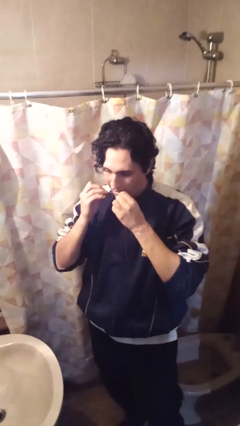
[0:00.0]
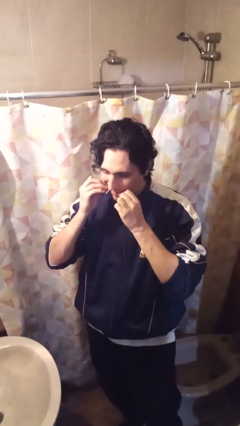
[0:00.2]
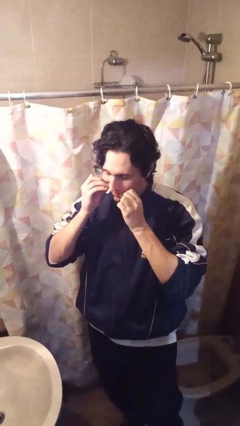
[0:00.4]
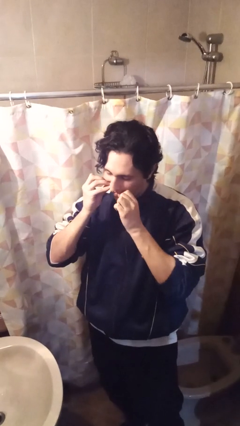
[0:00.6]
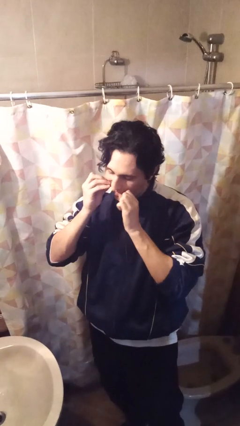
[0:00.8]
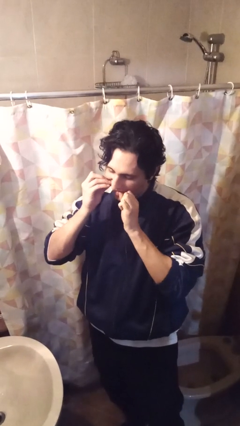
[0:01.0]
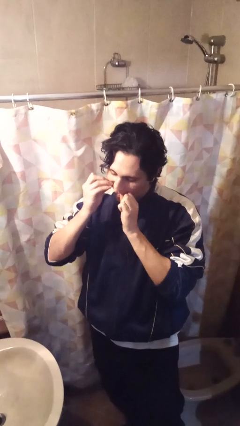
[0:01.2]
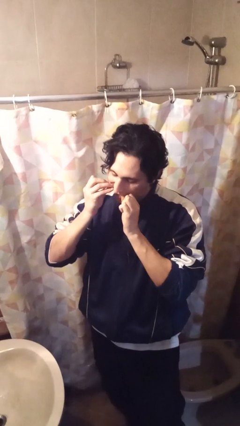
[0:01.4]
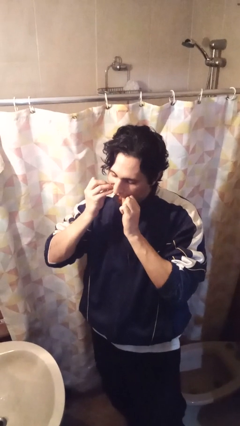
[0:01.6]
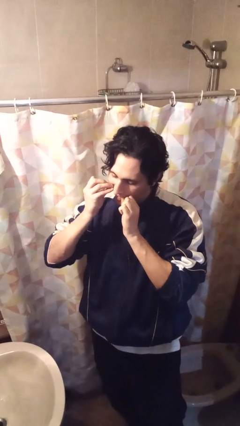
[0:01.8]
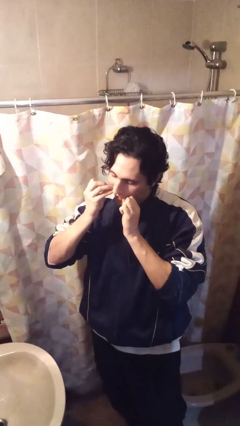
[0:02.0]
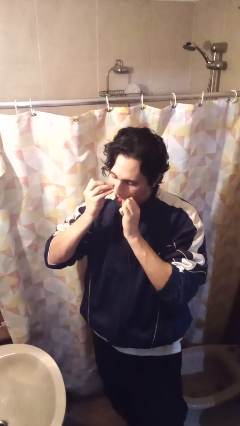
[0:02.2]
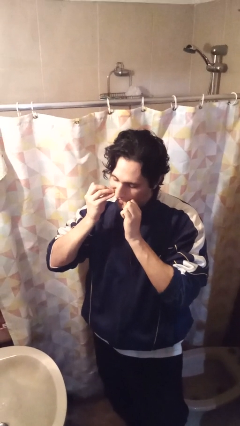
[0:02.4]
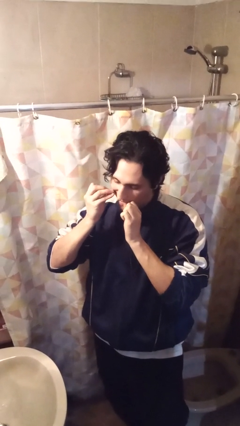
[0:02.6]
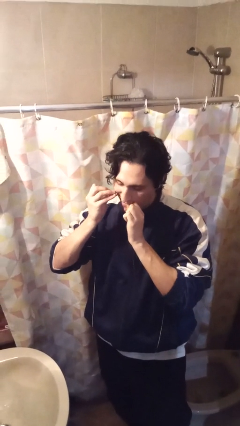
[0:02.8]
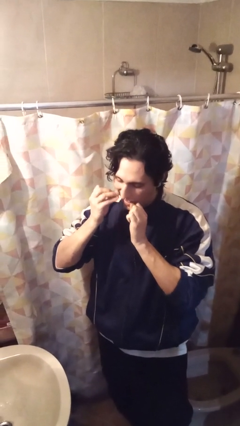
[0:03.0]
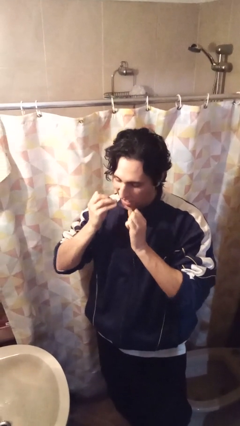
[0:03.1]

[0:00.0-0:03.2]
person flosses

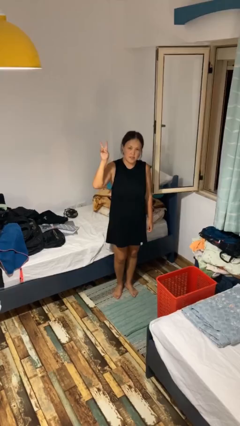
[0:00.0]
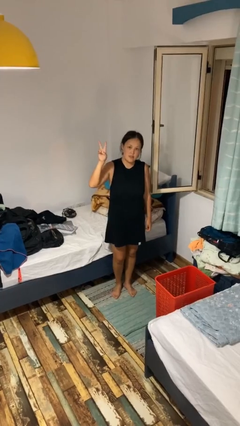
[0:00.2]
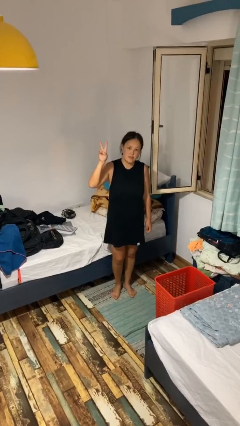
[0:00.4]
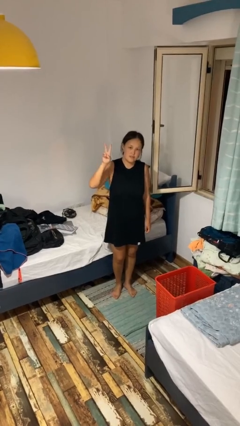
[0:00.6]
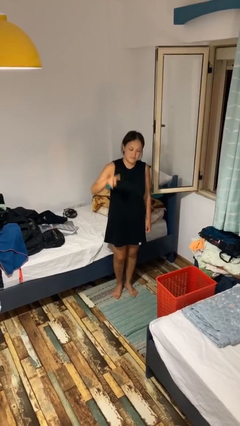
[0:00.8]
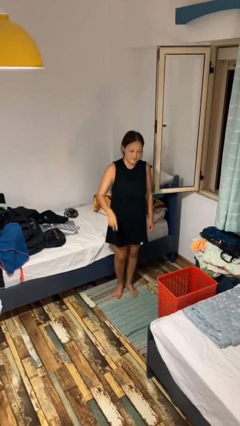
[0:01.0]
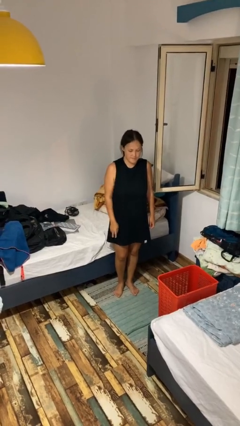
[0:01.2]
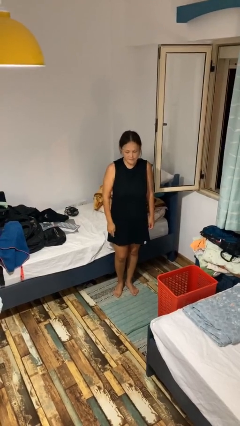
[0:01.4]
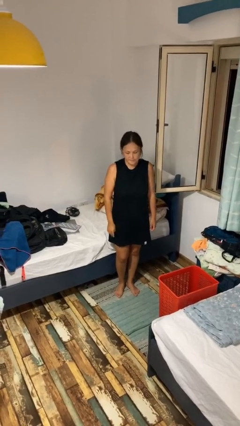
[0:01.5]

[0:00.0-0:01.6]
person gestures peace

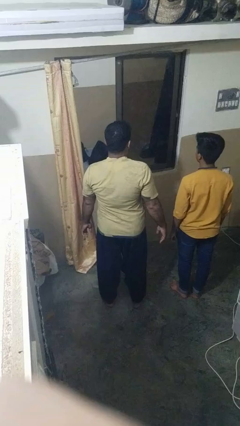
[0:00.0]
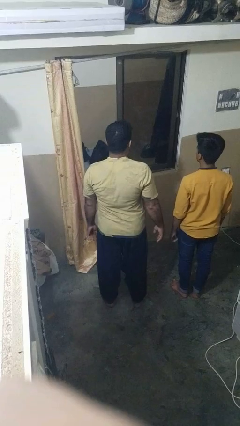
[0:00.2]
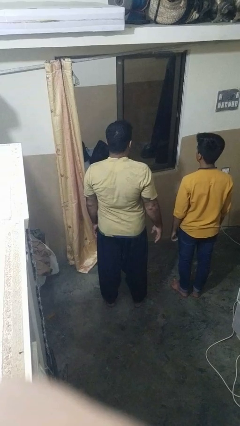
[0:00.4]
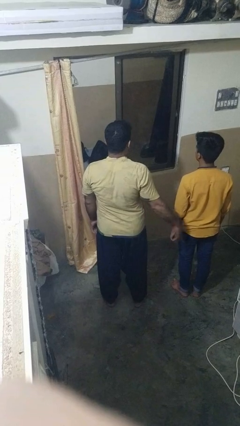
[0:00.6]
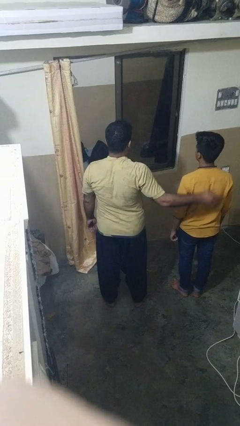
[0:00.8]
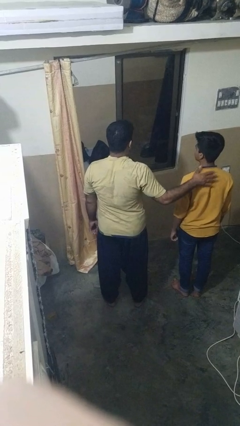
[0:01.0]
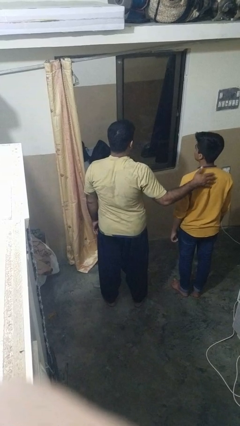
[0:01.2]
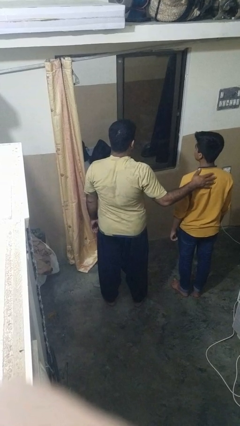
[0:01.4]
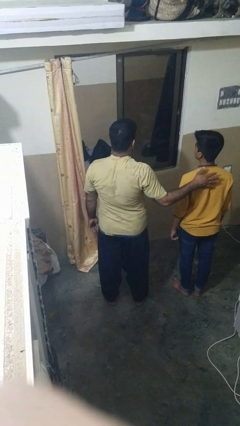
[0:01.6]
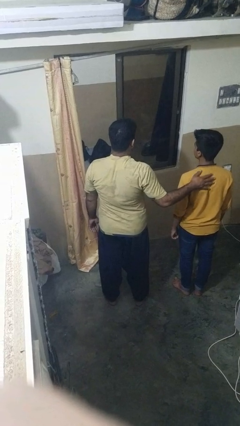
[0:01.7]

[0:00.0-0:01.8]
person touches back of person

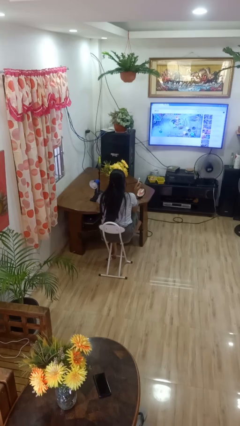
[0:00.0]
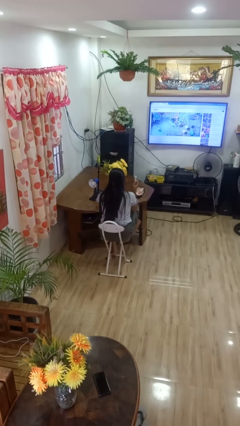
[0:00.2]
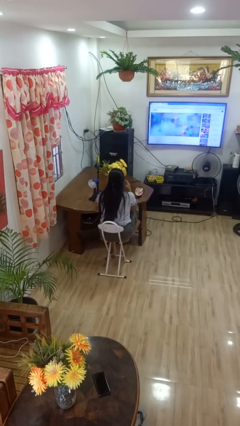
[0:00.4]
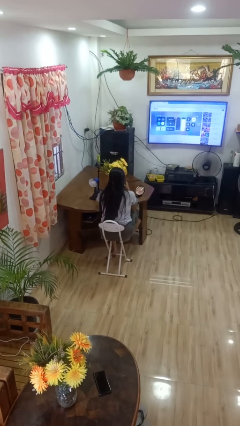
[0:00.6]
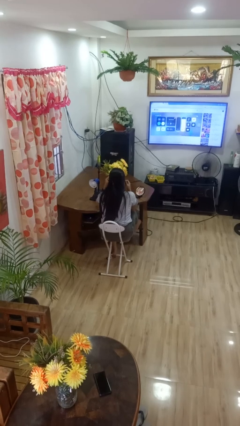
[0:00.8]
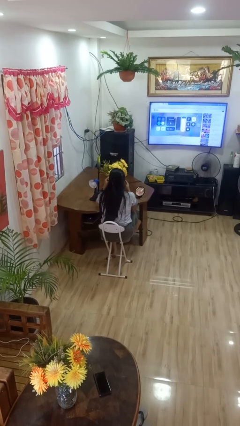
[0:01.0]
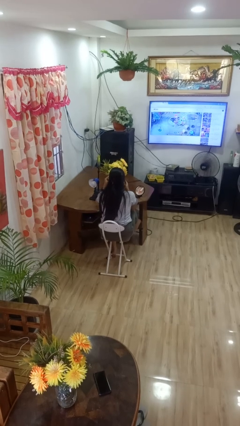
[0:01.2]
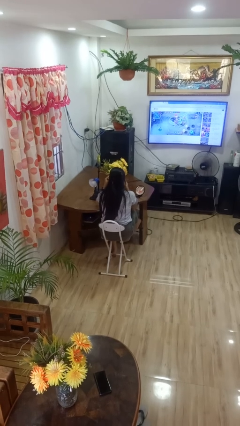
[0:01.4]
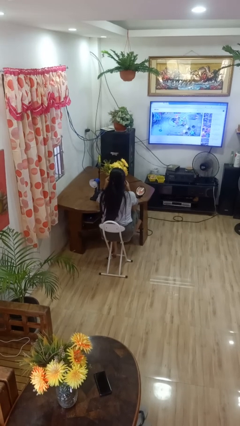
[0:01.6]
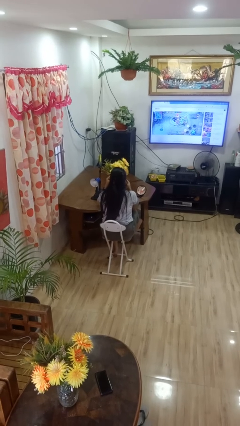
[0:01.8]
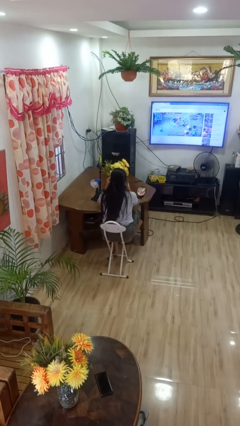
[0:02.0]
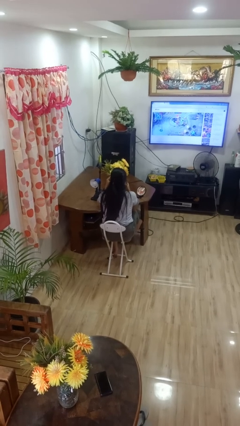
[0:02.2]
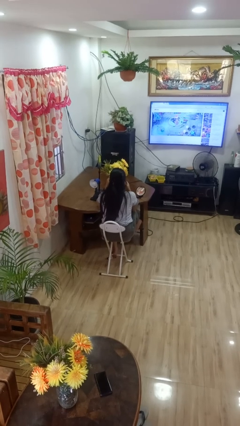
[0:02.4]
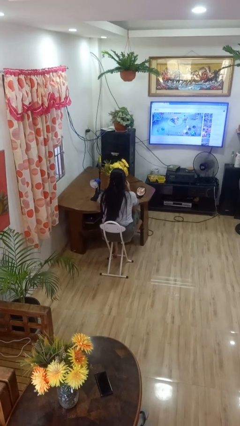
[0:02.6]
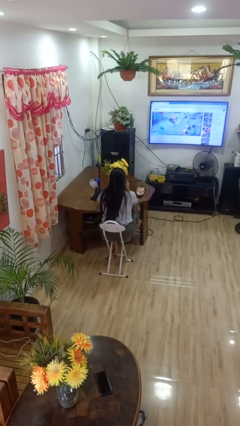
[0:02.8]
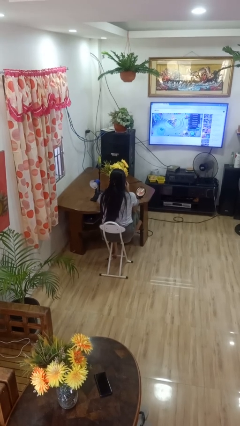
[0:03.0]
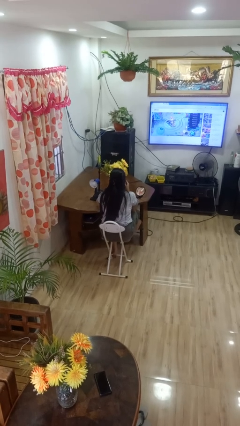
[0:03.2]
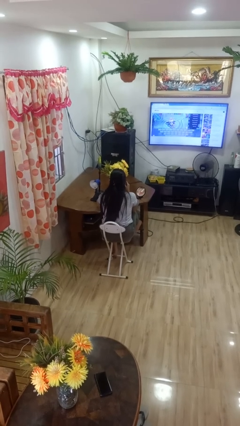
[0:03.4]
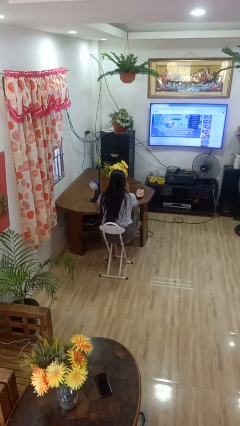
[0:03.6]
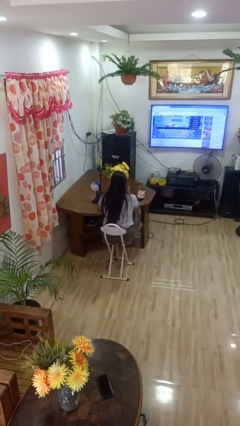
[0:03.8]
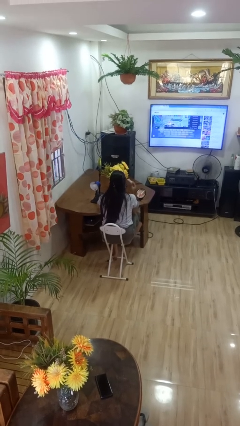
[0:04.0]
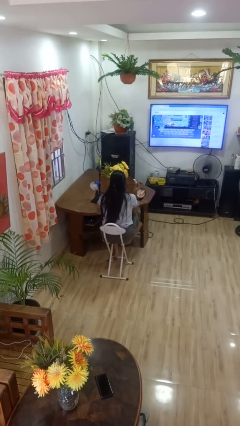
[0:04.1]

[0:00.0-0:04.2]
person applies lip makeup

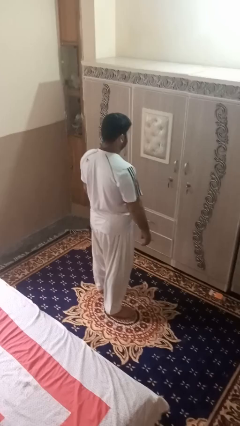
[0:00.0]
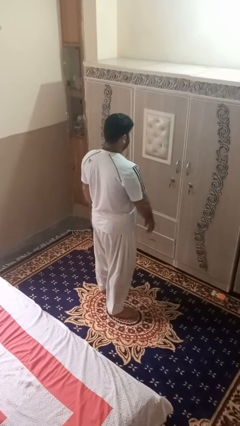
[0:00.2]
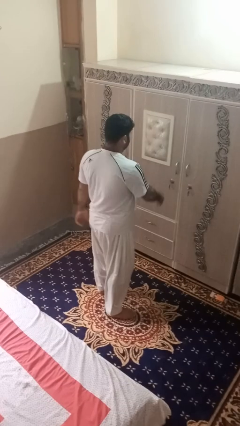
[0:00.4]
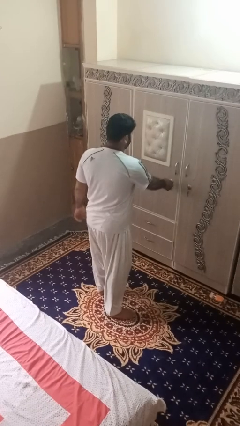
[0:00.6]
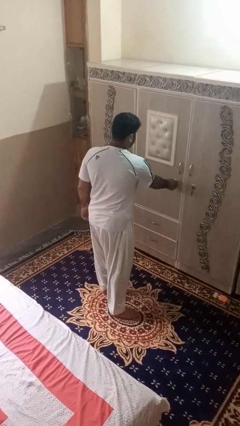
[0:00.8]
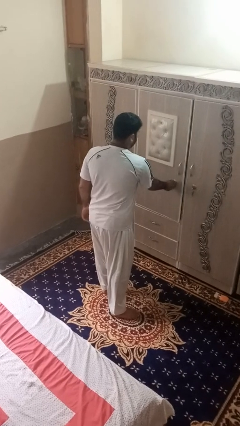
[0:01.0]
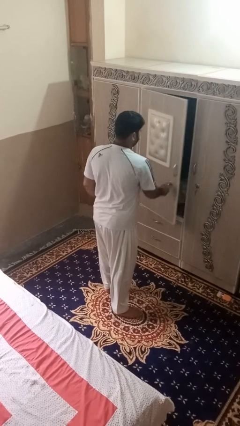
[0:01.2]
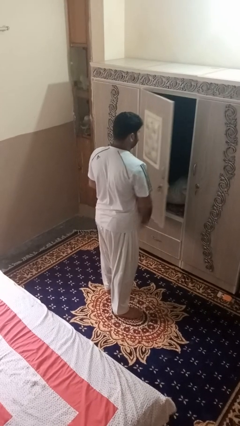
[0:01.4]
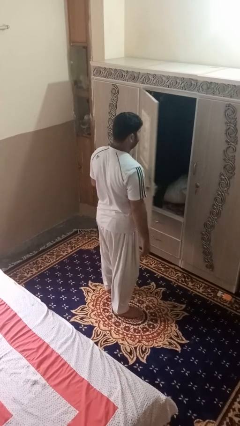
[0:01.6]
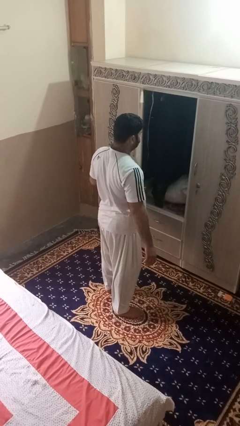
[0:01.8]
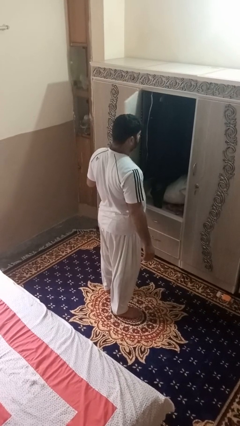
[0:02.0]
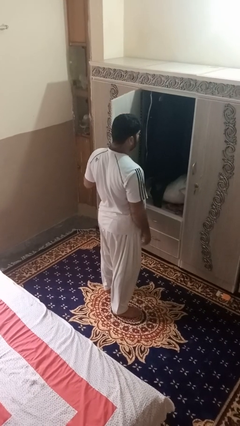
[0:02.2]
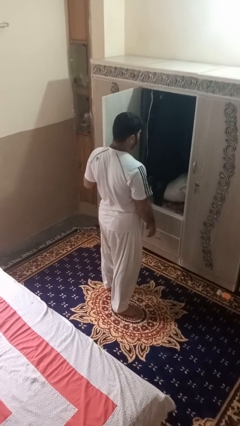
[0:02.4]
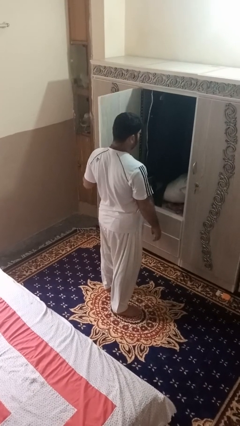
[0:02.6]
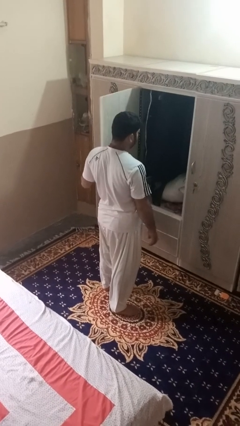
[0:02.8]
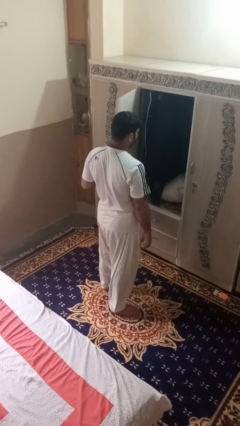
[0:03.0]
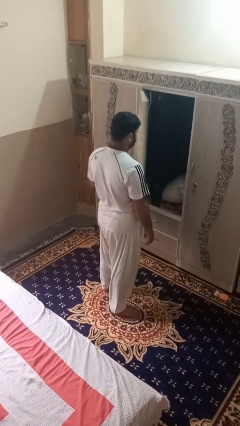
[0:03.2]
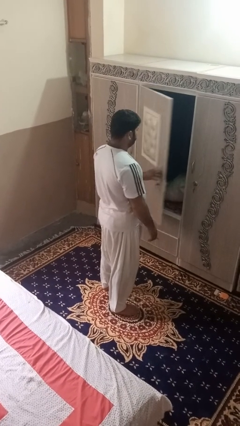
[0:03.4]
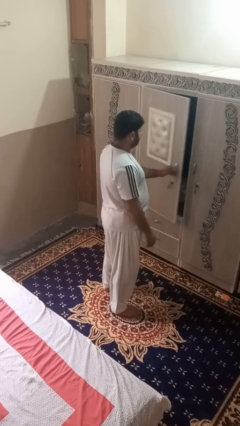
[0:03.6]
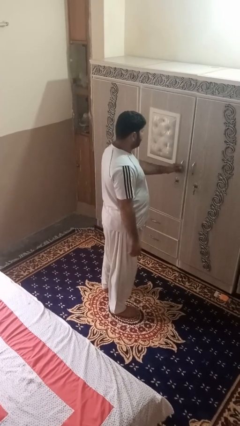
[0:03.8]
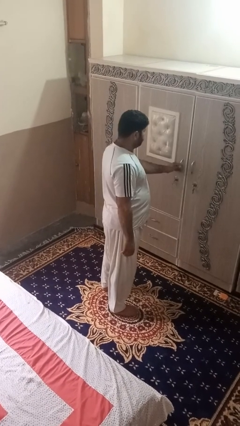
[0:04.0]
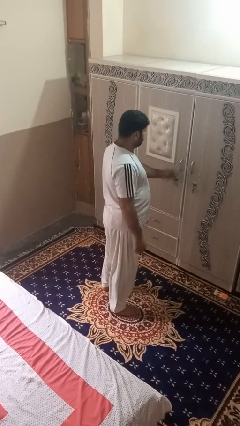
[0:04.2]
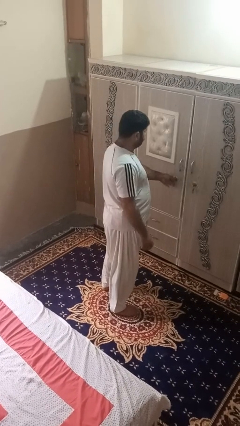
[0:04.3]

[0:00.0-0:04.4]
person opens dresser drawer

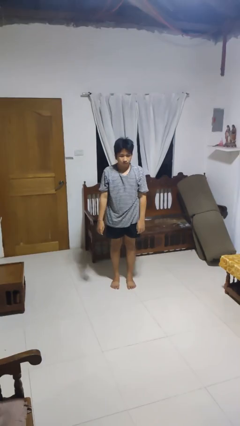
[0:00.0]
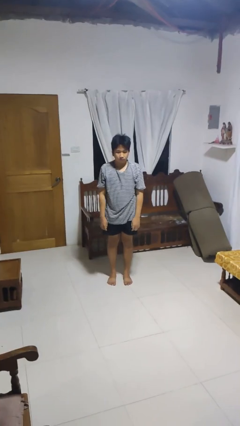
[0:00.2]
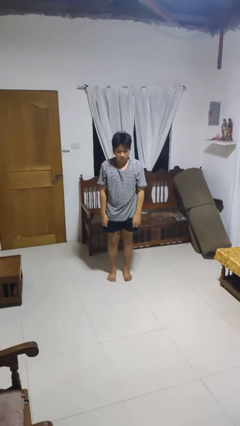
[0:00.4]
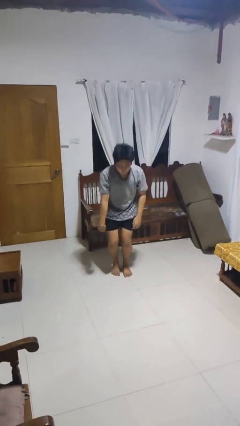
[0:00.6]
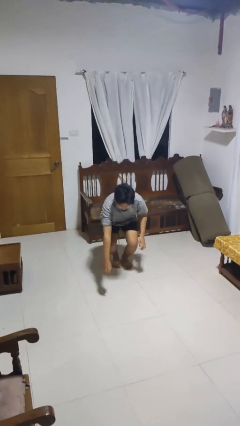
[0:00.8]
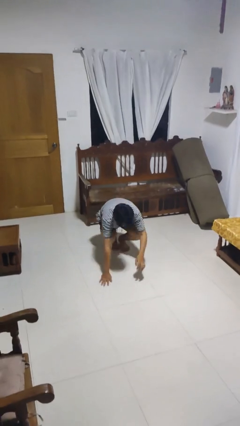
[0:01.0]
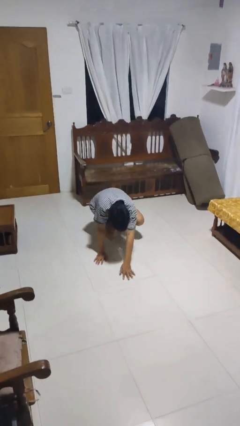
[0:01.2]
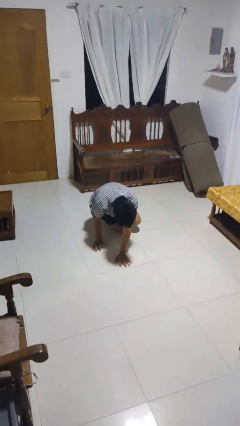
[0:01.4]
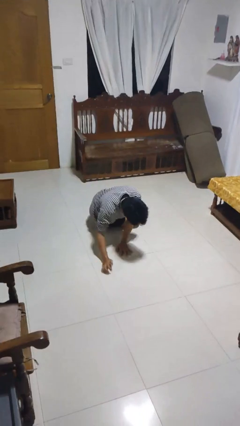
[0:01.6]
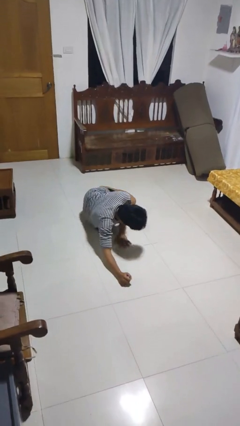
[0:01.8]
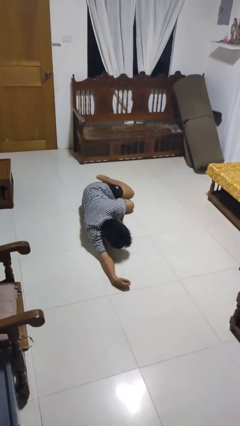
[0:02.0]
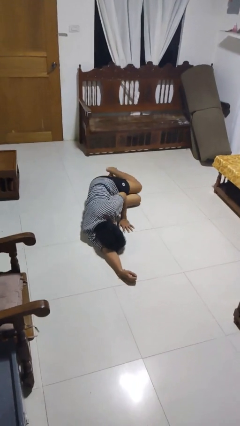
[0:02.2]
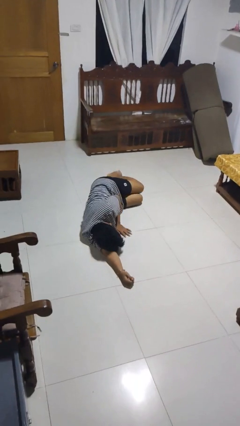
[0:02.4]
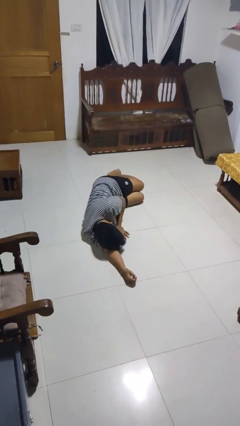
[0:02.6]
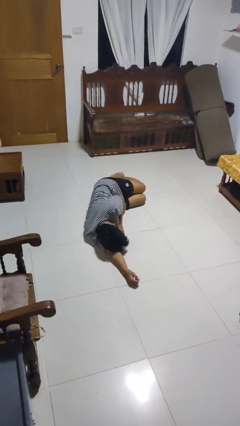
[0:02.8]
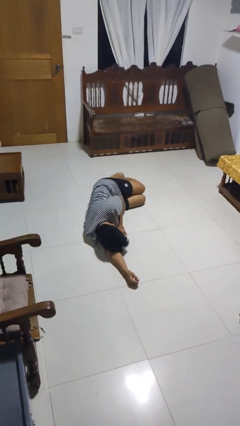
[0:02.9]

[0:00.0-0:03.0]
person falls while standing
